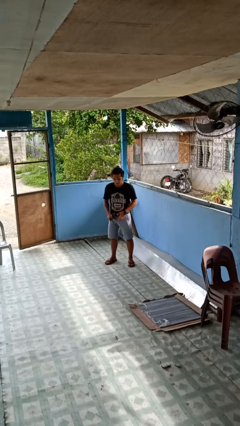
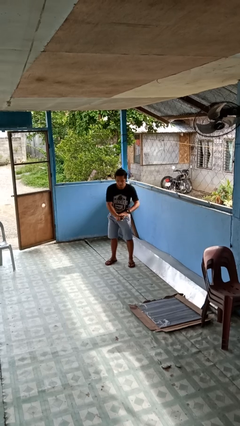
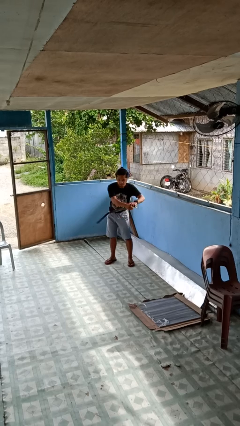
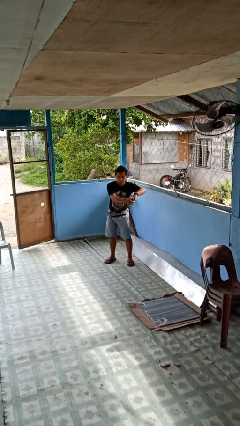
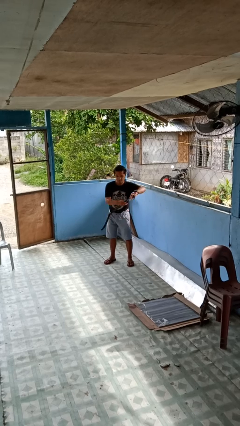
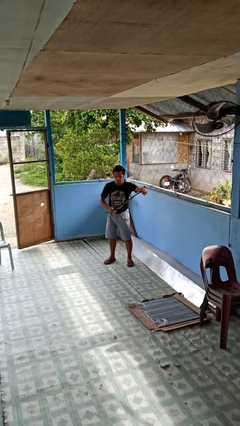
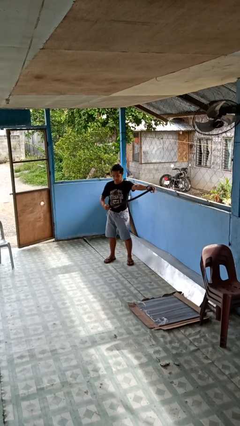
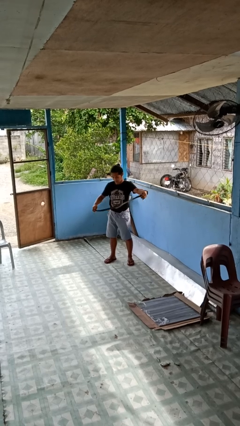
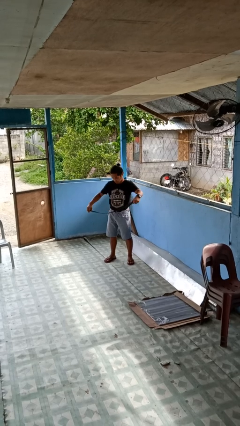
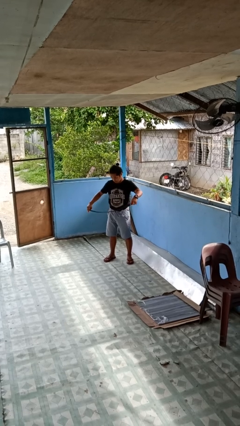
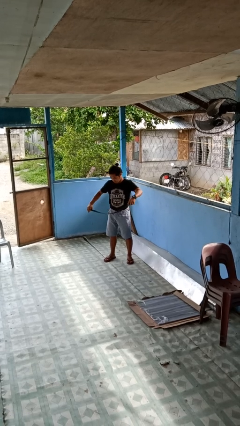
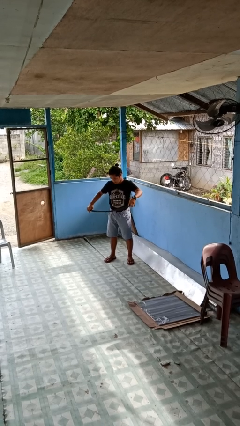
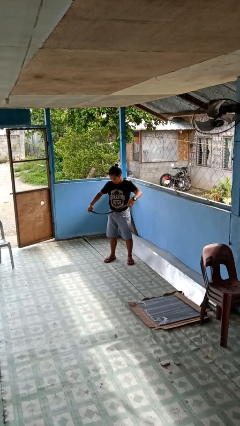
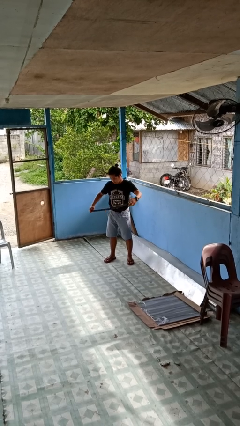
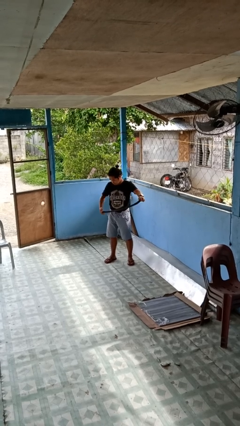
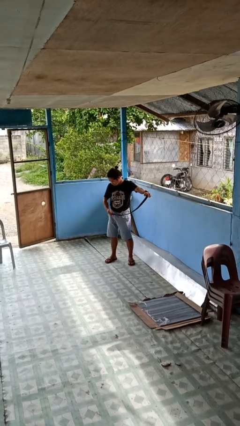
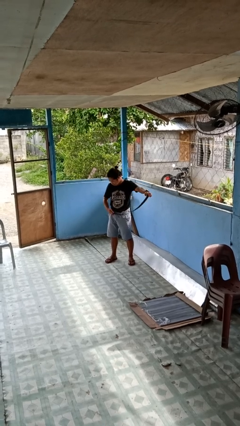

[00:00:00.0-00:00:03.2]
person takes off belt

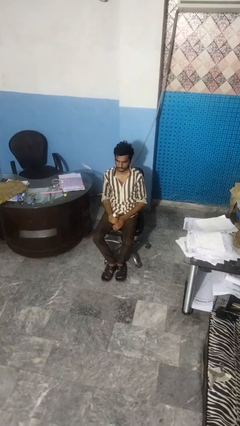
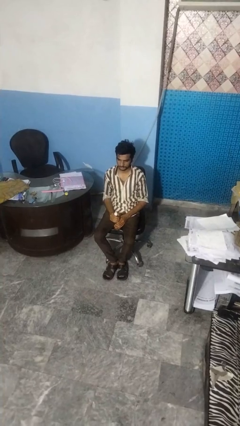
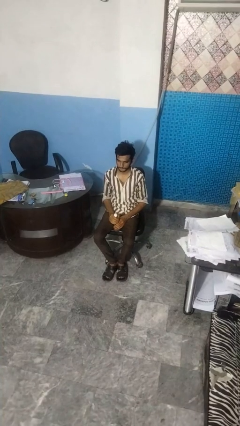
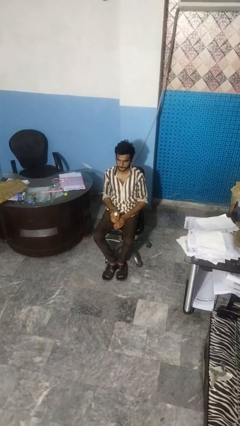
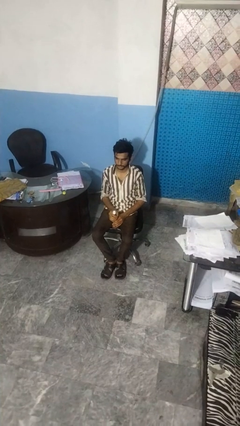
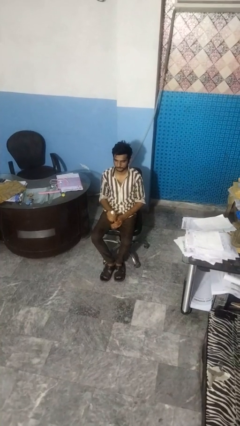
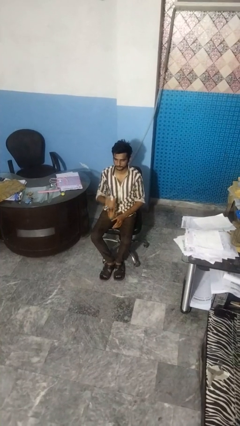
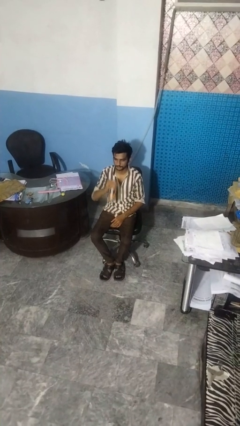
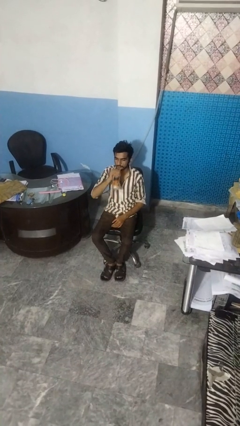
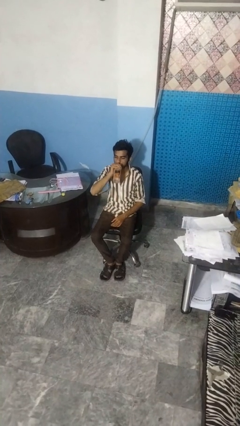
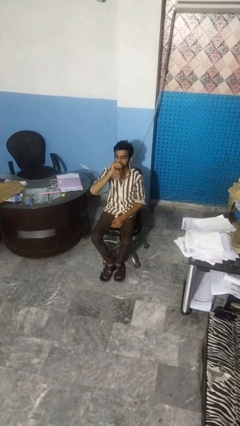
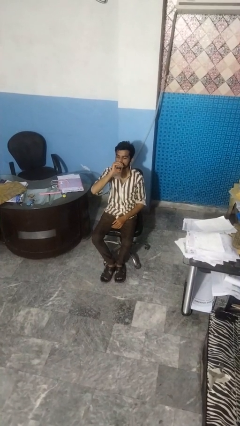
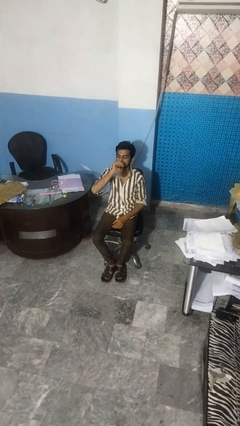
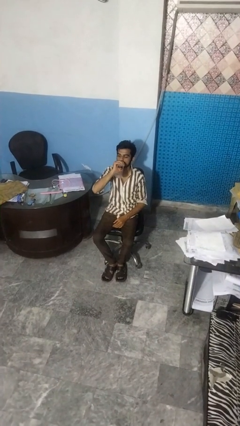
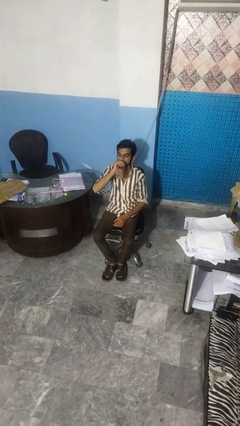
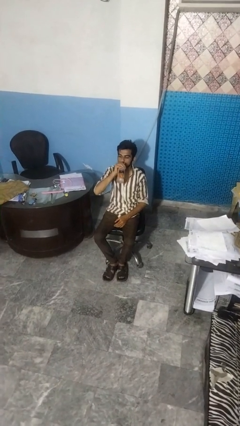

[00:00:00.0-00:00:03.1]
person drinks from bottle

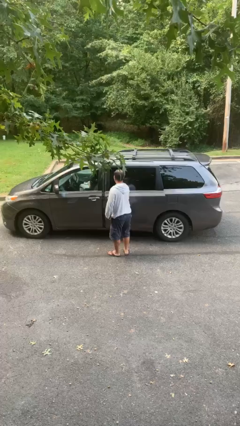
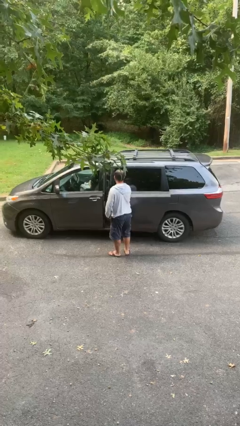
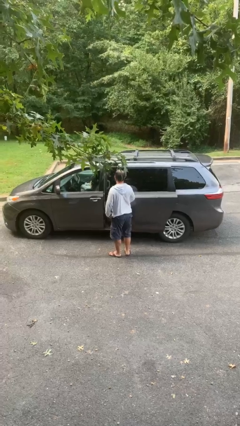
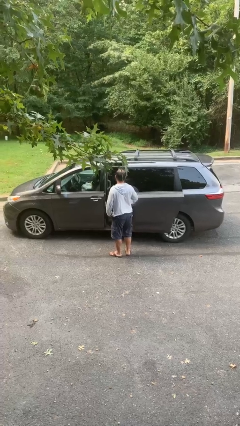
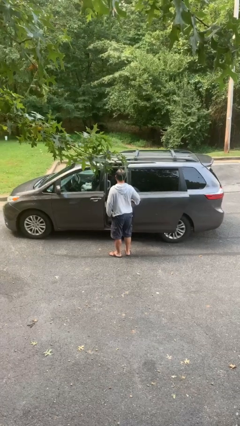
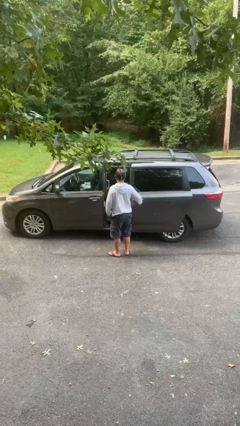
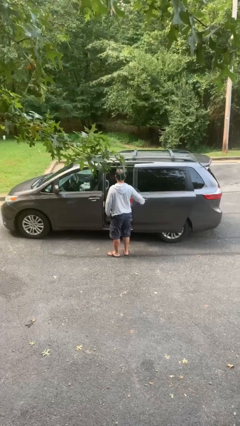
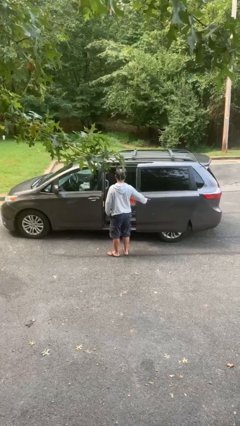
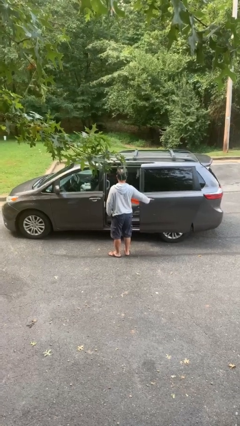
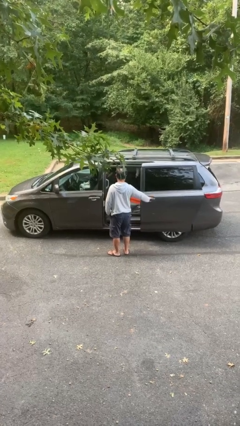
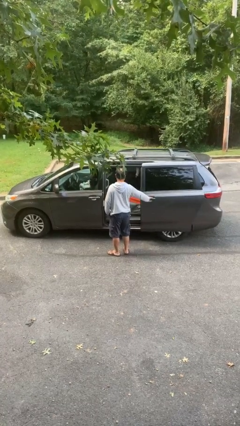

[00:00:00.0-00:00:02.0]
person opens car door

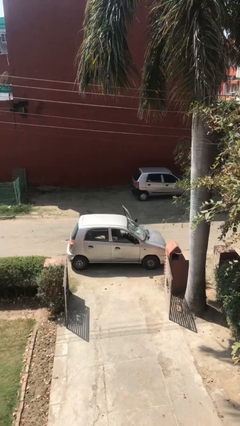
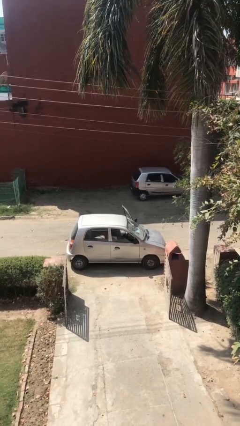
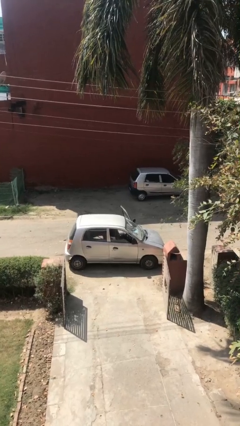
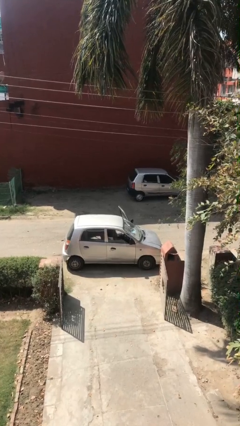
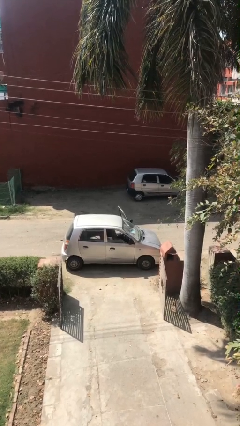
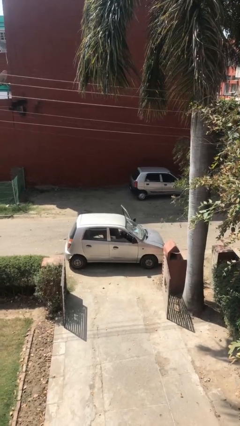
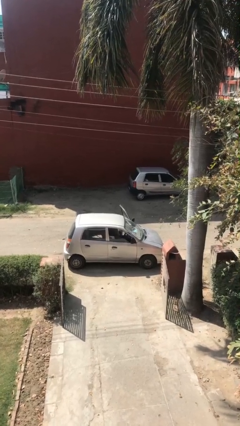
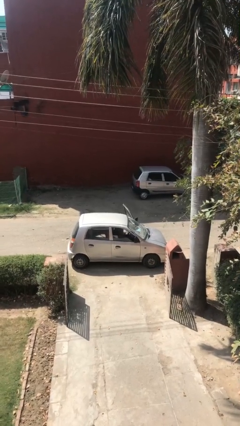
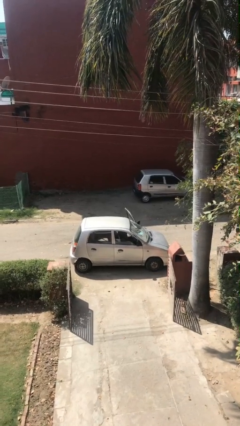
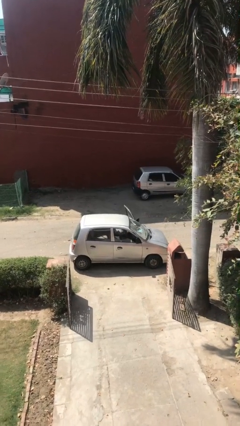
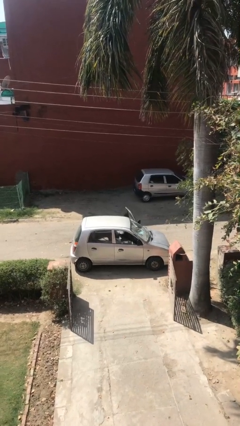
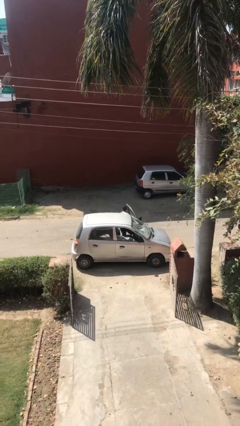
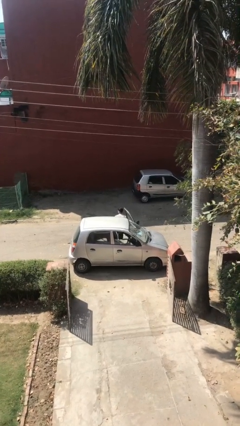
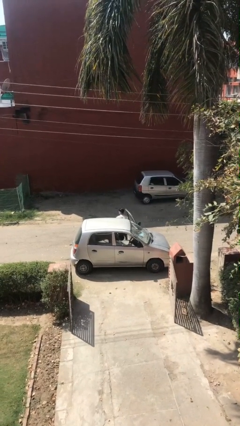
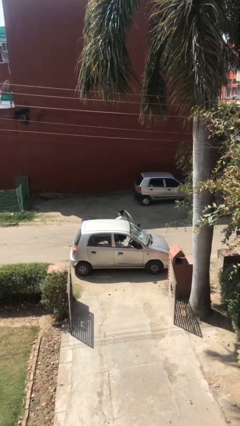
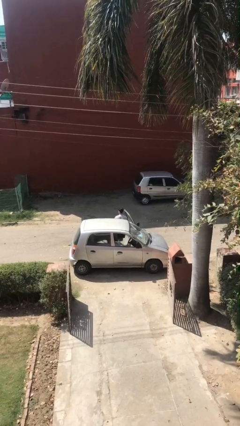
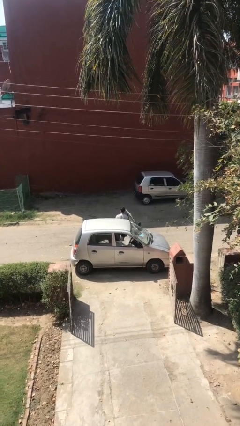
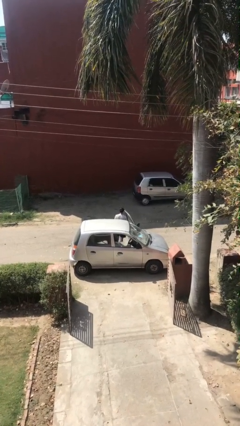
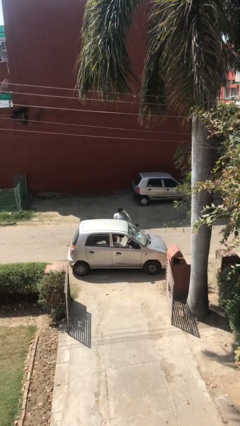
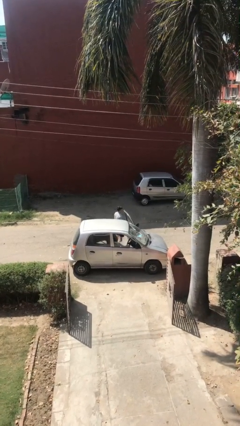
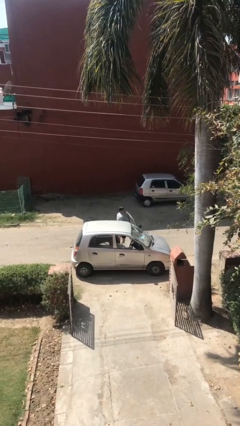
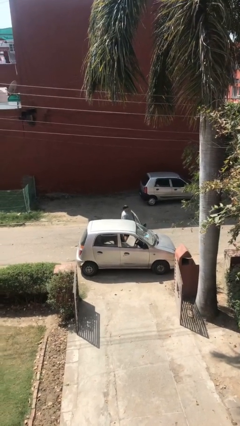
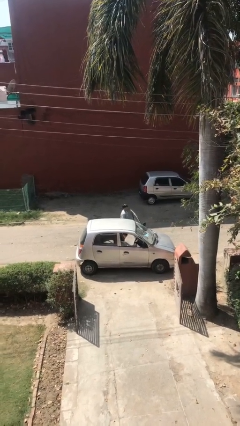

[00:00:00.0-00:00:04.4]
person exits car

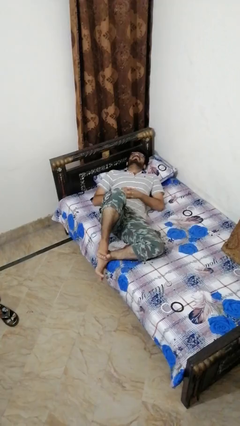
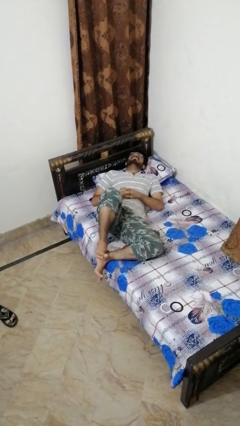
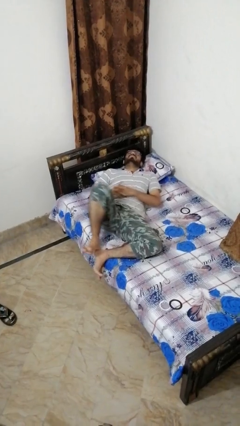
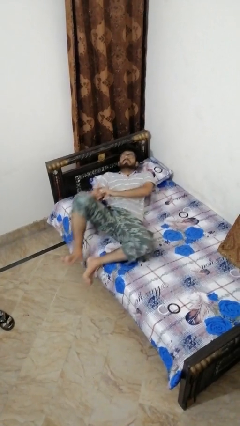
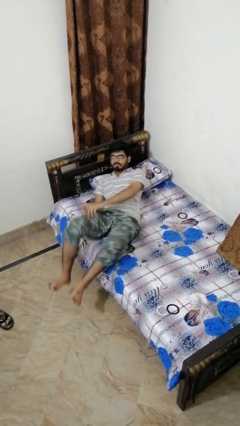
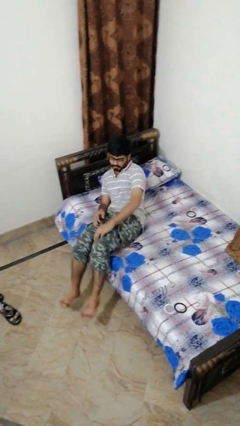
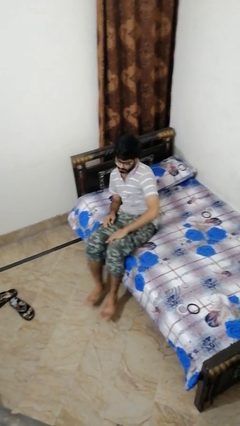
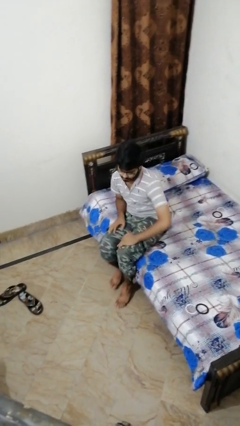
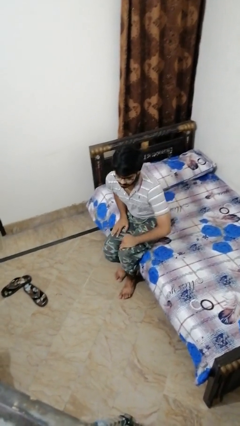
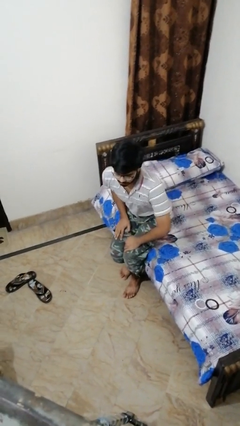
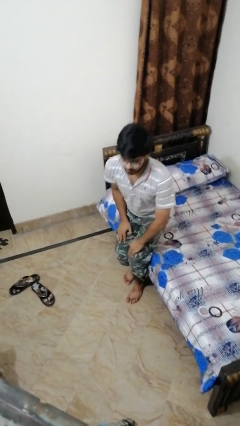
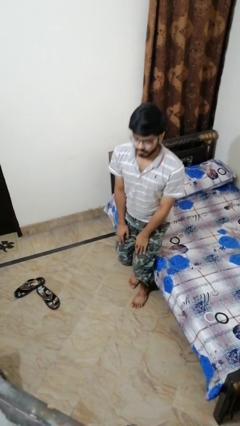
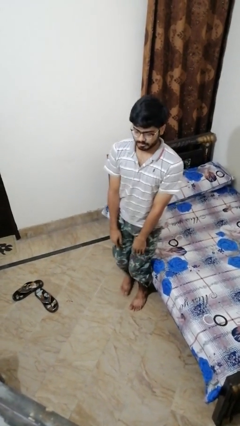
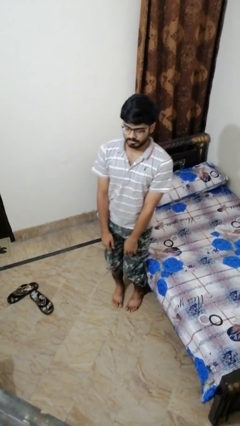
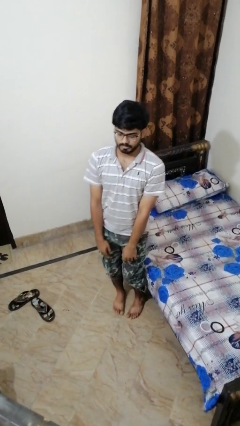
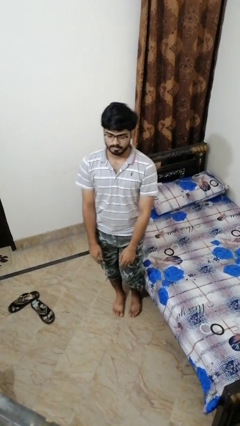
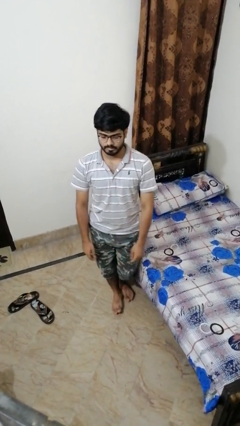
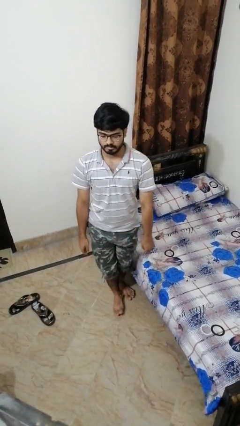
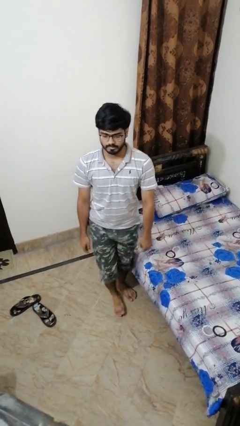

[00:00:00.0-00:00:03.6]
person stands up

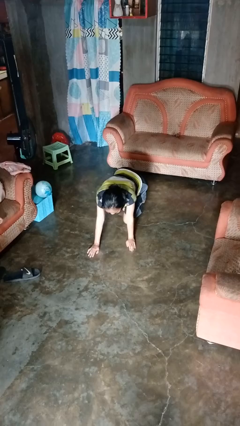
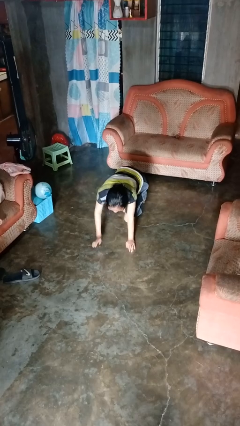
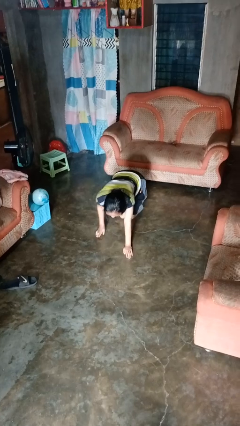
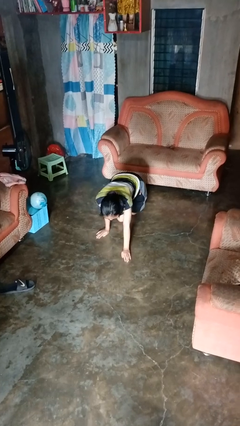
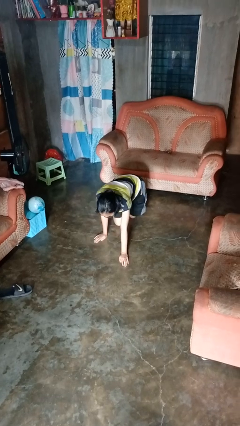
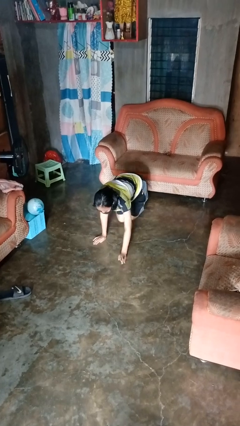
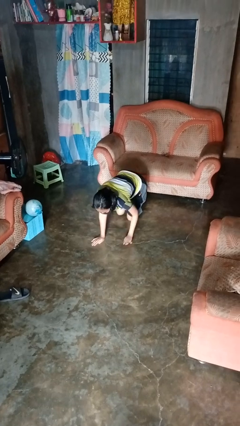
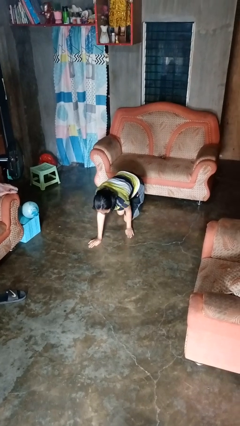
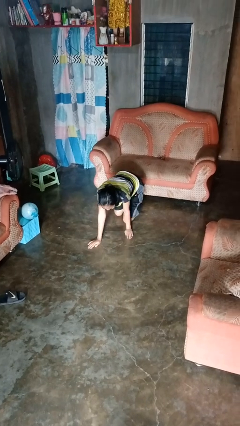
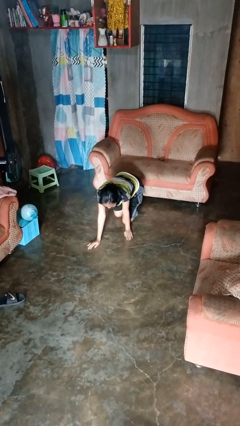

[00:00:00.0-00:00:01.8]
person crawls
